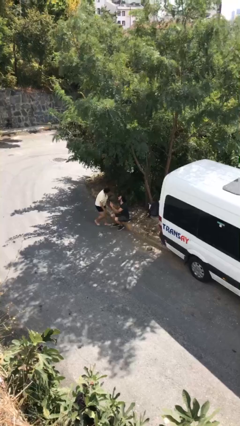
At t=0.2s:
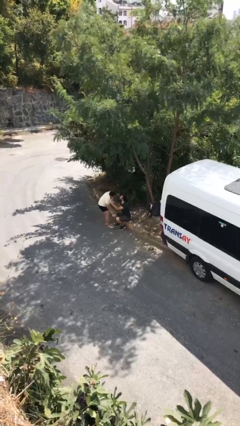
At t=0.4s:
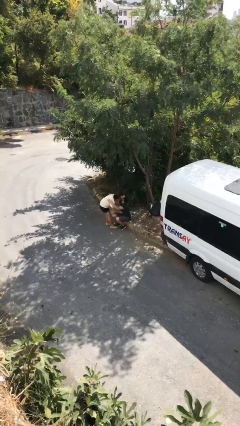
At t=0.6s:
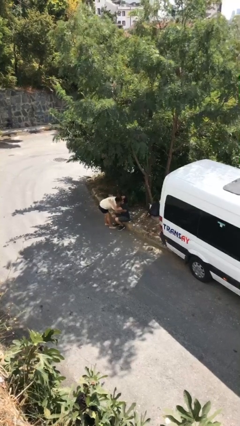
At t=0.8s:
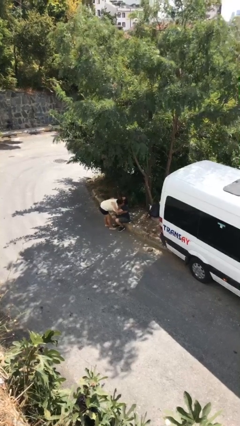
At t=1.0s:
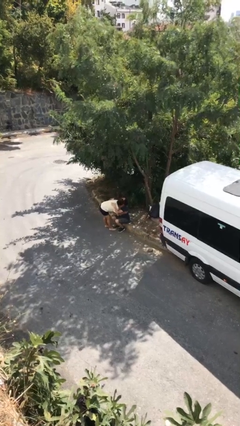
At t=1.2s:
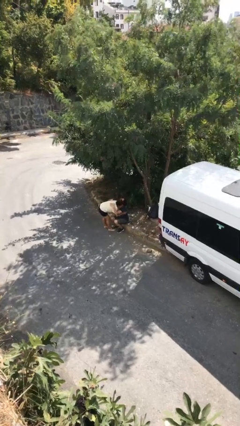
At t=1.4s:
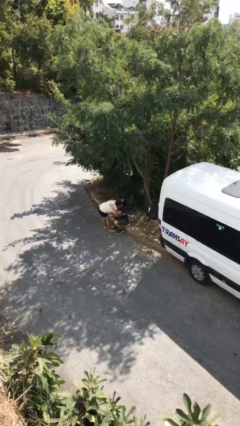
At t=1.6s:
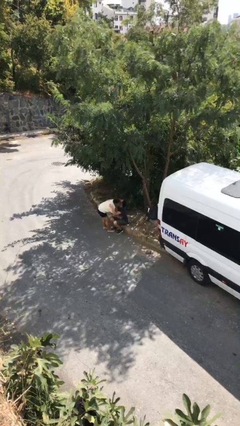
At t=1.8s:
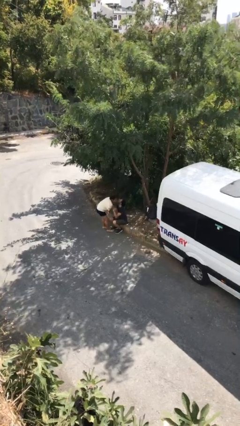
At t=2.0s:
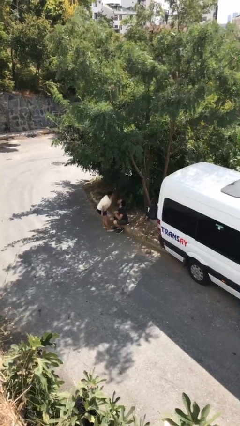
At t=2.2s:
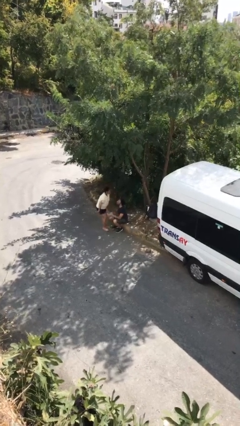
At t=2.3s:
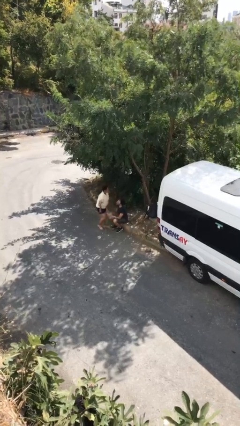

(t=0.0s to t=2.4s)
person embraces person

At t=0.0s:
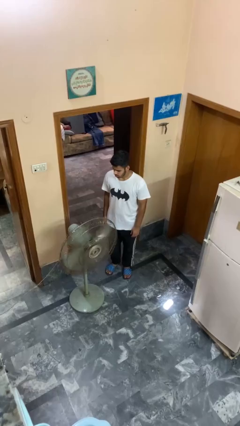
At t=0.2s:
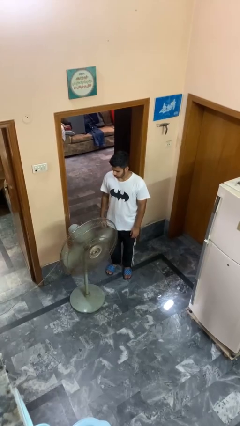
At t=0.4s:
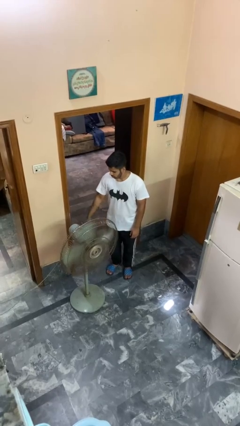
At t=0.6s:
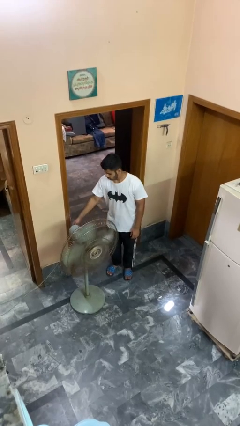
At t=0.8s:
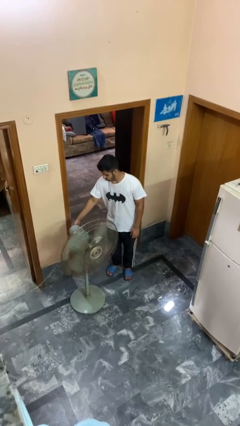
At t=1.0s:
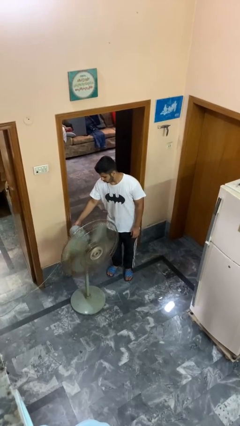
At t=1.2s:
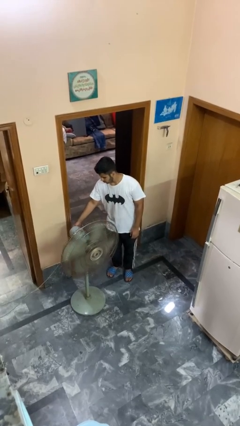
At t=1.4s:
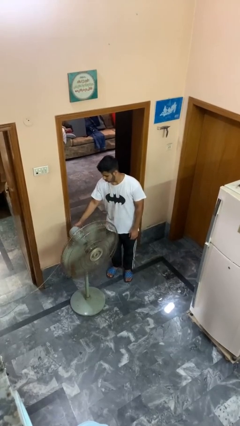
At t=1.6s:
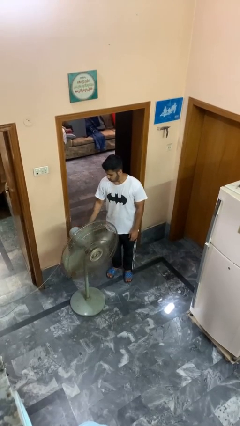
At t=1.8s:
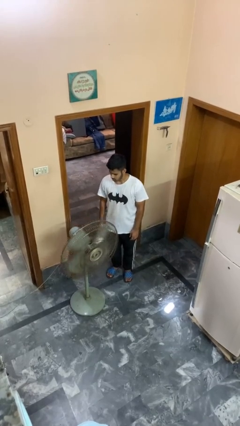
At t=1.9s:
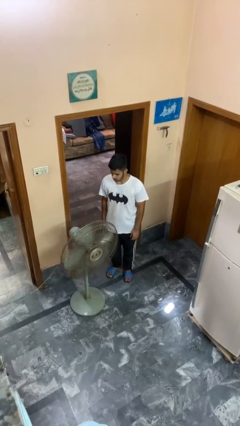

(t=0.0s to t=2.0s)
person turns off fan

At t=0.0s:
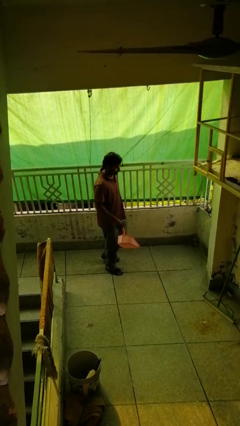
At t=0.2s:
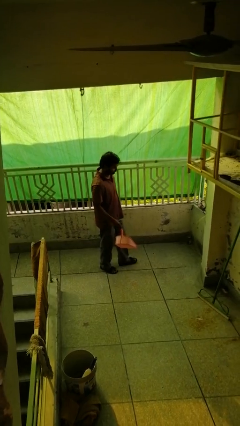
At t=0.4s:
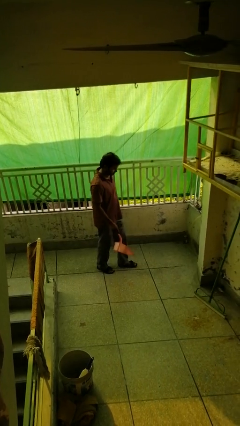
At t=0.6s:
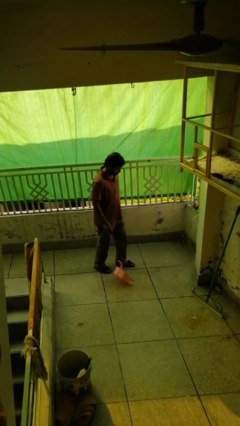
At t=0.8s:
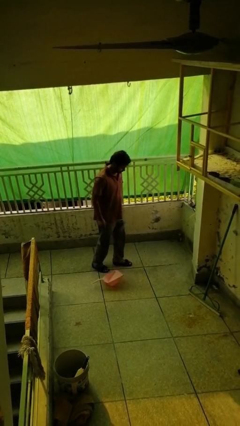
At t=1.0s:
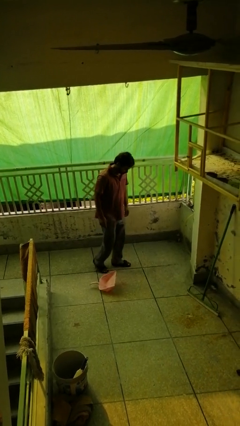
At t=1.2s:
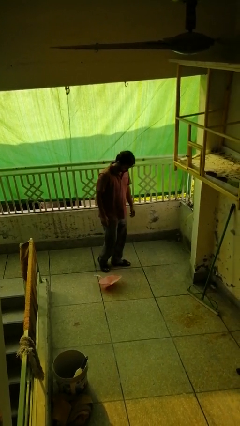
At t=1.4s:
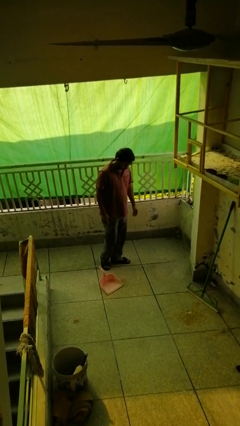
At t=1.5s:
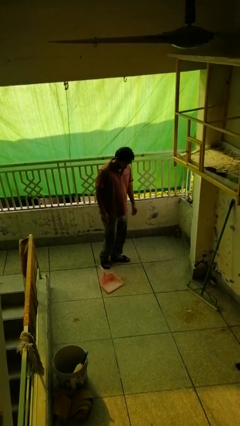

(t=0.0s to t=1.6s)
person drops object

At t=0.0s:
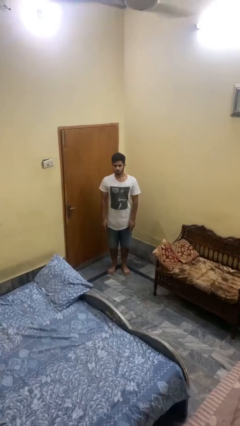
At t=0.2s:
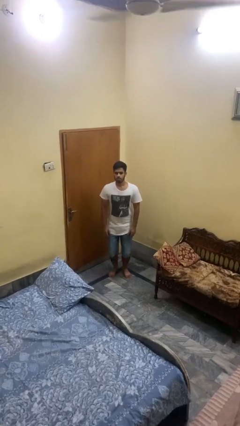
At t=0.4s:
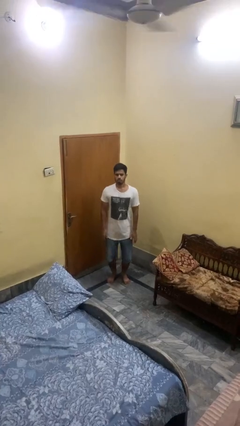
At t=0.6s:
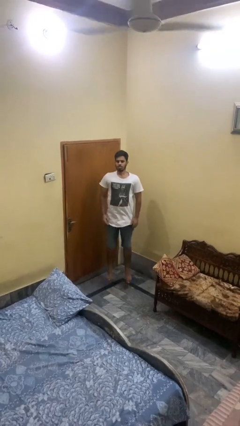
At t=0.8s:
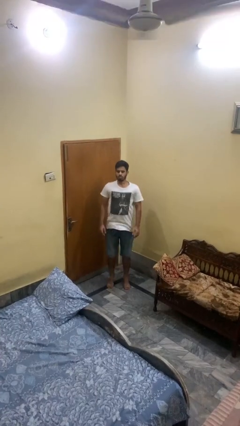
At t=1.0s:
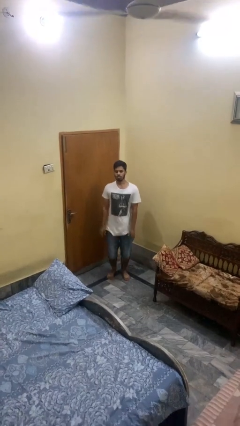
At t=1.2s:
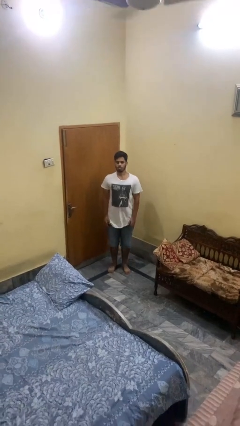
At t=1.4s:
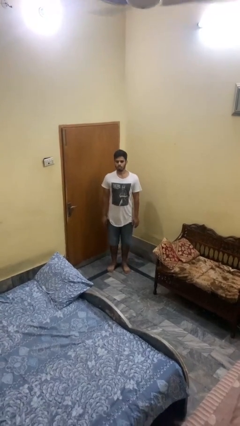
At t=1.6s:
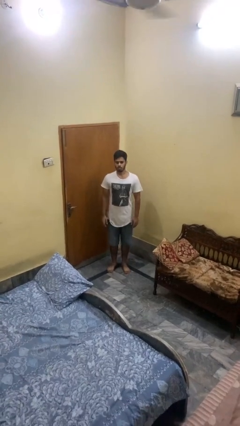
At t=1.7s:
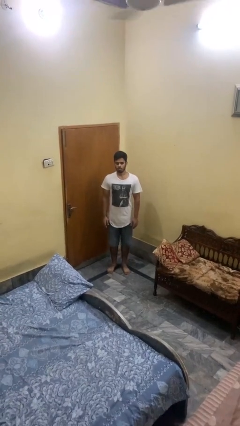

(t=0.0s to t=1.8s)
person jumps

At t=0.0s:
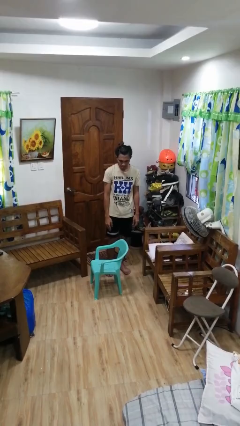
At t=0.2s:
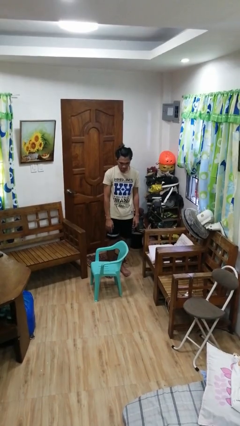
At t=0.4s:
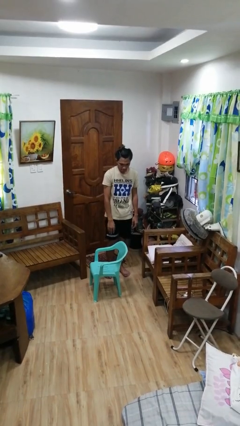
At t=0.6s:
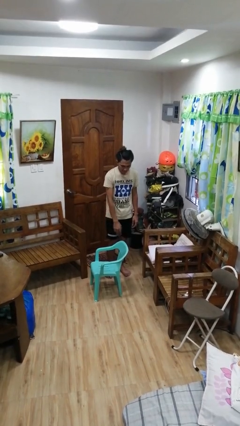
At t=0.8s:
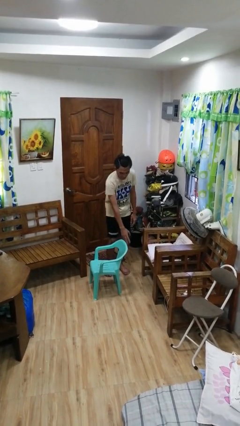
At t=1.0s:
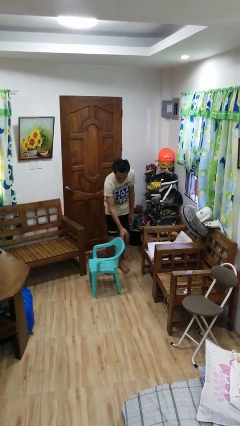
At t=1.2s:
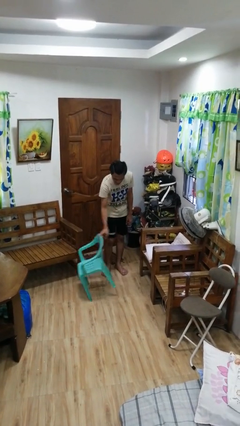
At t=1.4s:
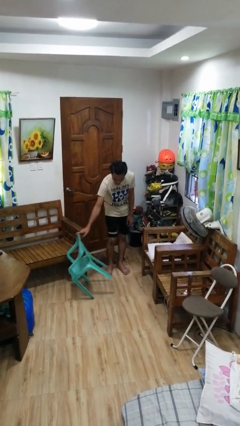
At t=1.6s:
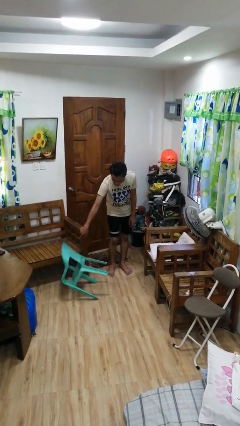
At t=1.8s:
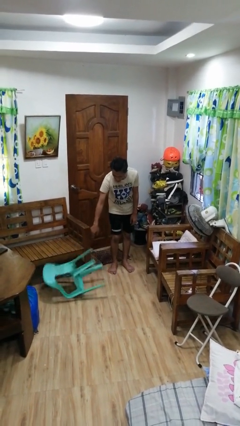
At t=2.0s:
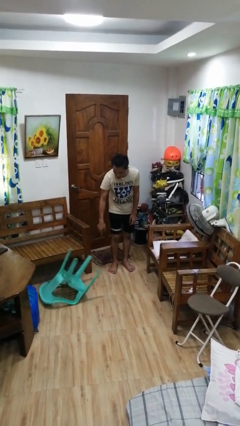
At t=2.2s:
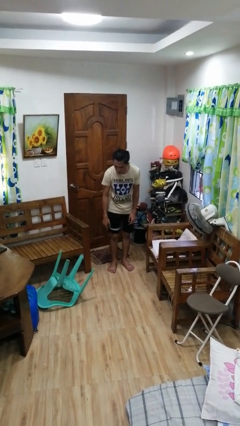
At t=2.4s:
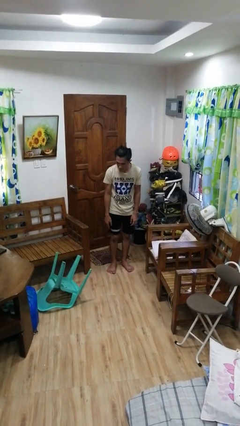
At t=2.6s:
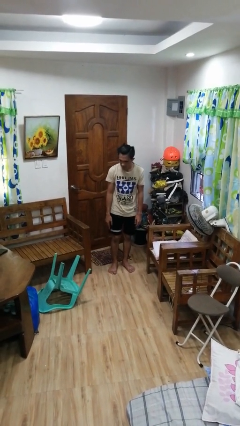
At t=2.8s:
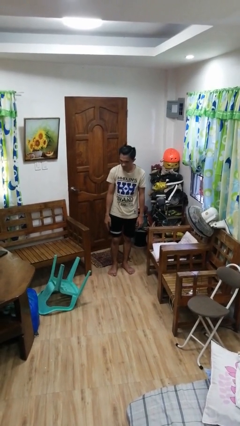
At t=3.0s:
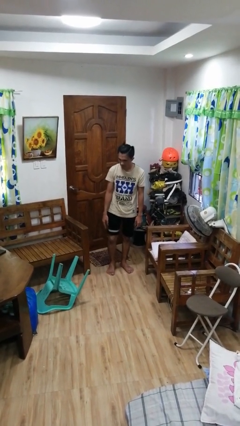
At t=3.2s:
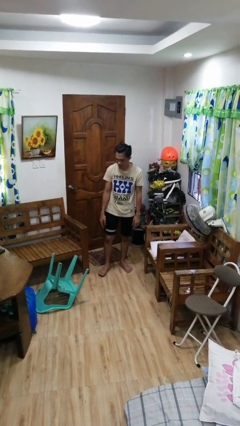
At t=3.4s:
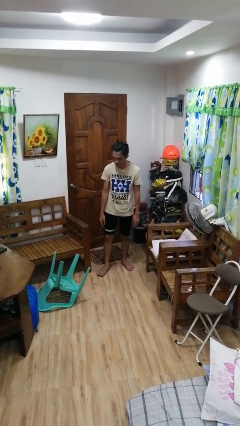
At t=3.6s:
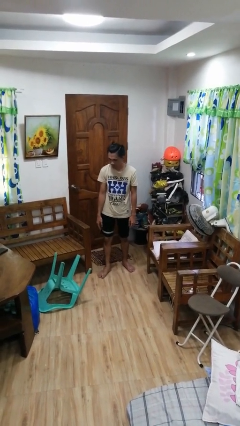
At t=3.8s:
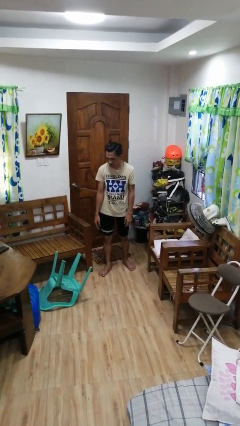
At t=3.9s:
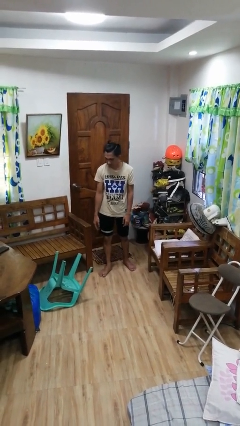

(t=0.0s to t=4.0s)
person knocks over furniture

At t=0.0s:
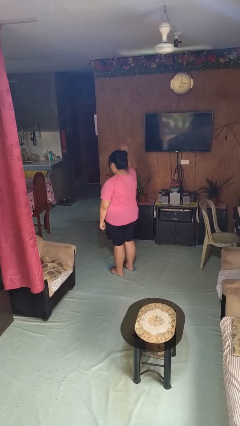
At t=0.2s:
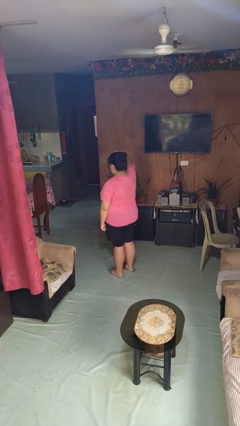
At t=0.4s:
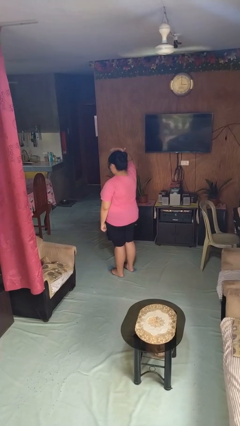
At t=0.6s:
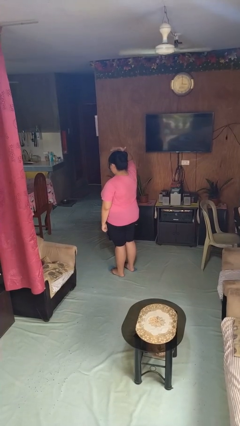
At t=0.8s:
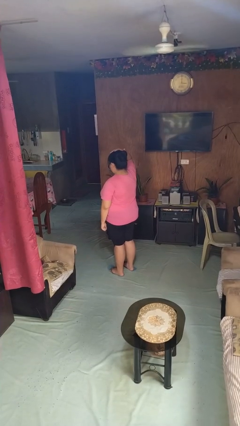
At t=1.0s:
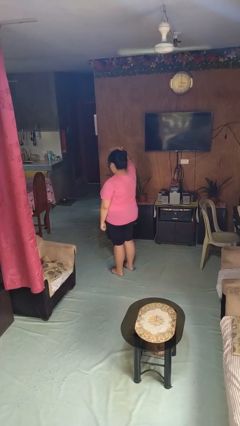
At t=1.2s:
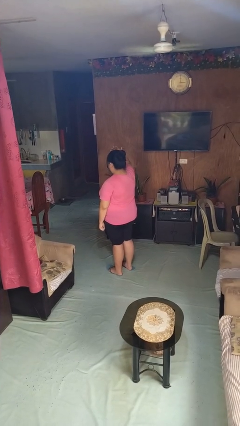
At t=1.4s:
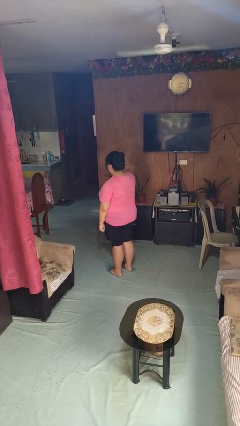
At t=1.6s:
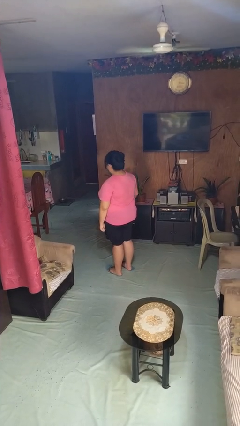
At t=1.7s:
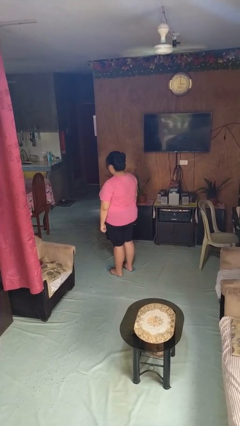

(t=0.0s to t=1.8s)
person pats head

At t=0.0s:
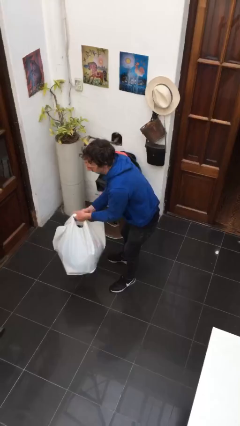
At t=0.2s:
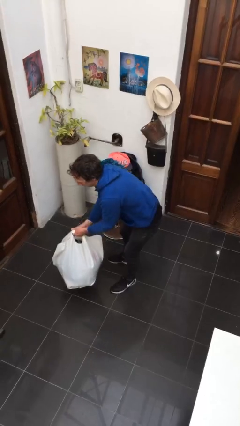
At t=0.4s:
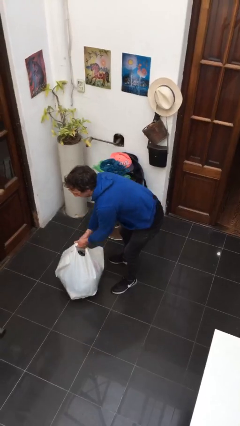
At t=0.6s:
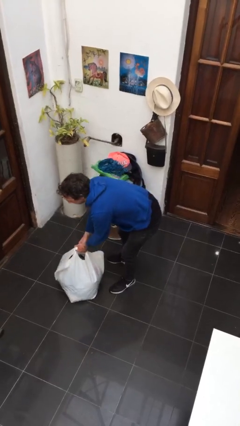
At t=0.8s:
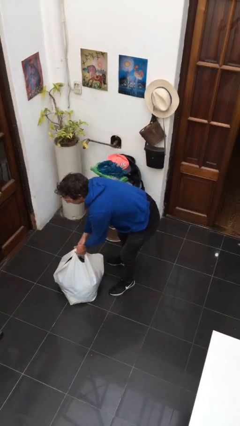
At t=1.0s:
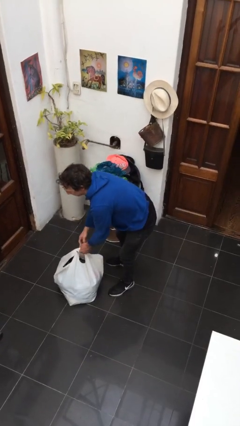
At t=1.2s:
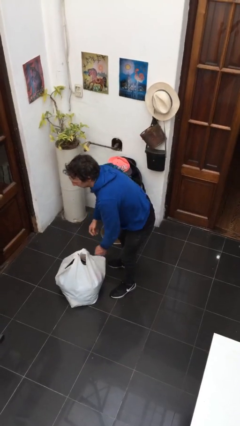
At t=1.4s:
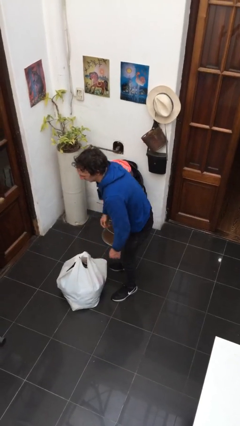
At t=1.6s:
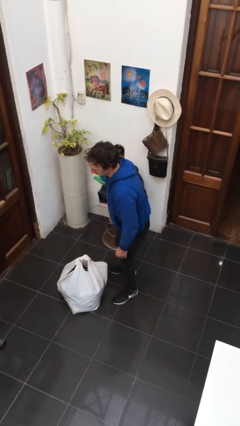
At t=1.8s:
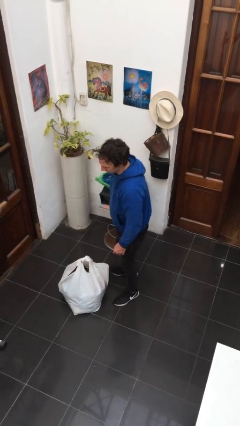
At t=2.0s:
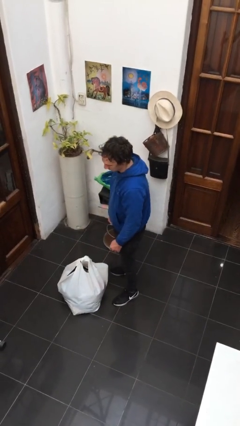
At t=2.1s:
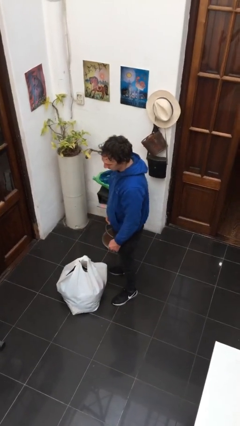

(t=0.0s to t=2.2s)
person puts down object on floor

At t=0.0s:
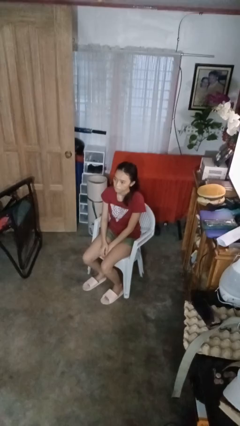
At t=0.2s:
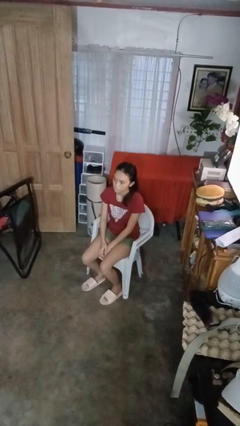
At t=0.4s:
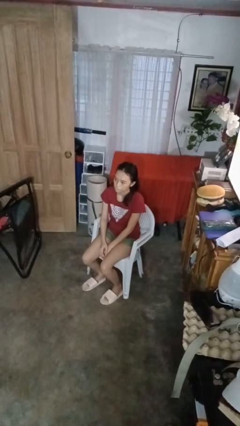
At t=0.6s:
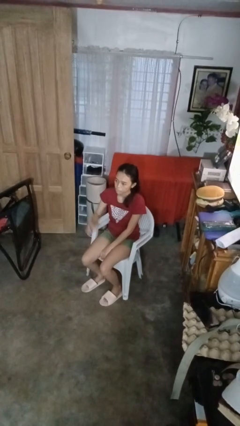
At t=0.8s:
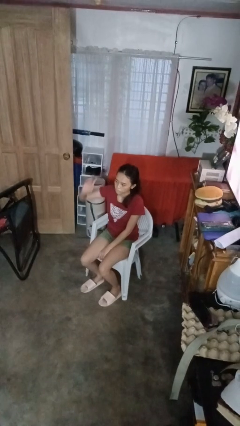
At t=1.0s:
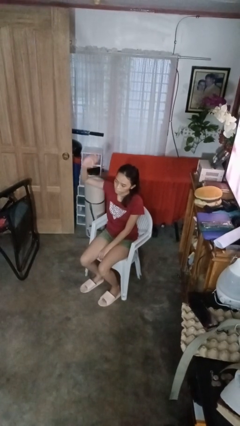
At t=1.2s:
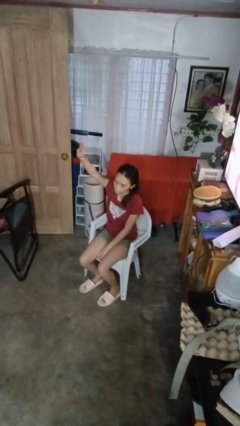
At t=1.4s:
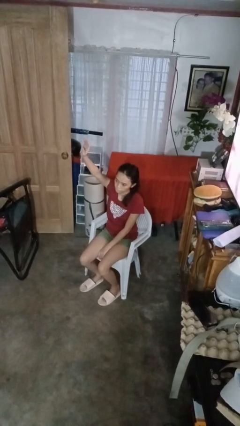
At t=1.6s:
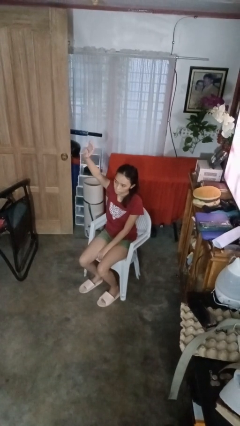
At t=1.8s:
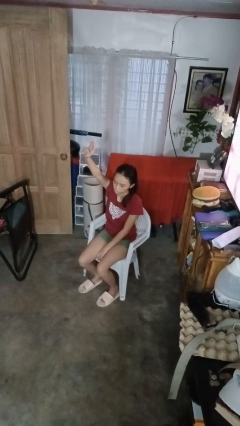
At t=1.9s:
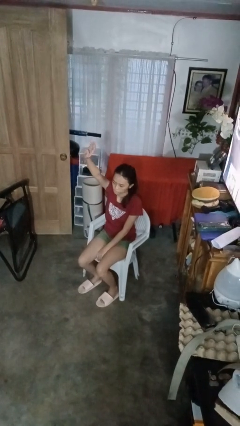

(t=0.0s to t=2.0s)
person gestures raise hand
